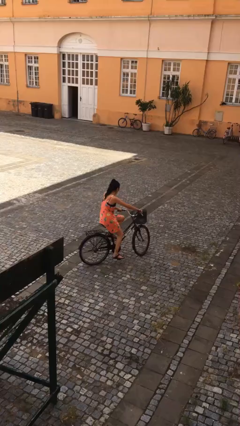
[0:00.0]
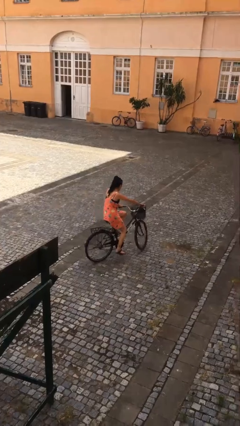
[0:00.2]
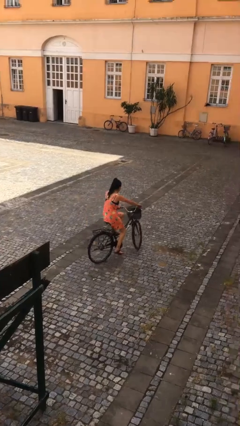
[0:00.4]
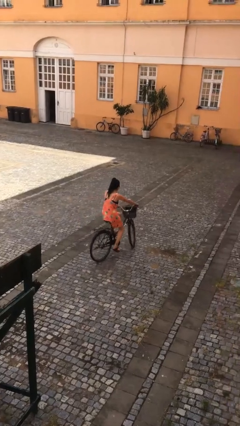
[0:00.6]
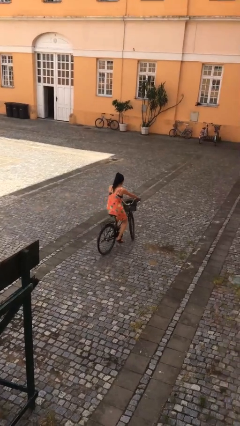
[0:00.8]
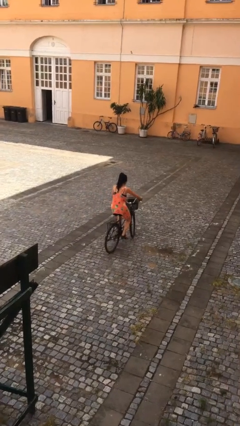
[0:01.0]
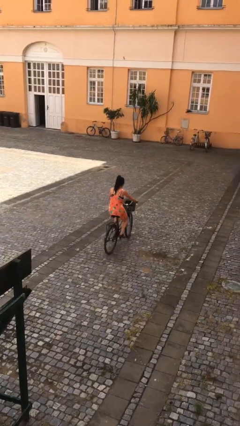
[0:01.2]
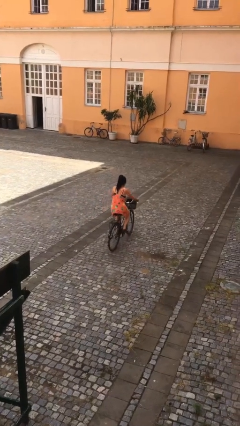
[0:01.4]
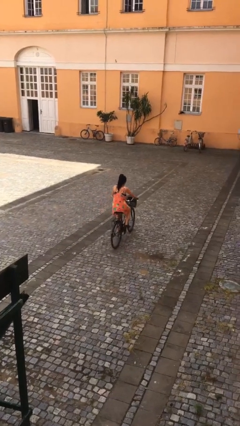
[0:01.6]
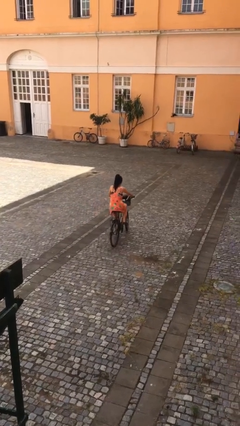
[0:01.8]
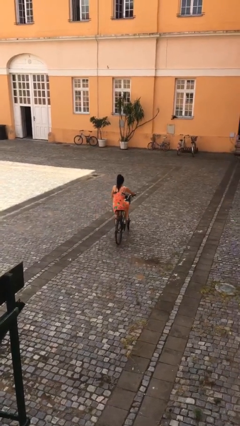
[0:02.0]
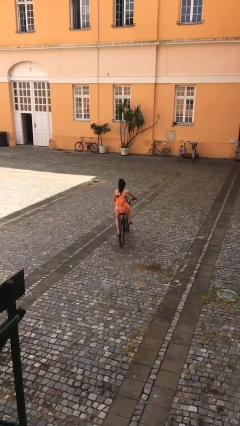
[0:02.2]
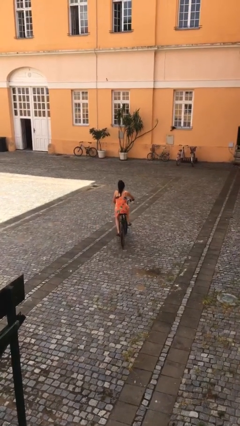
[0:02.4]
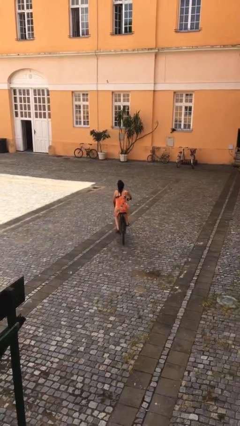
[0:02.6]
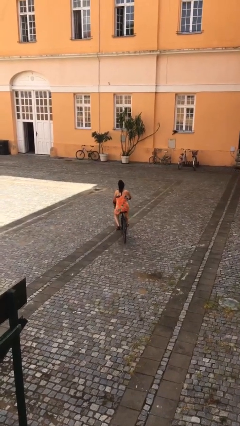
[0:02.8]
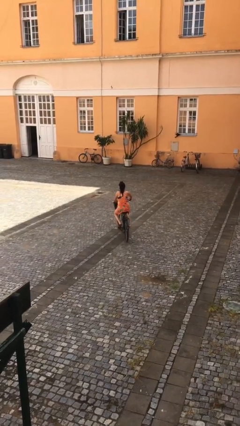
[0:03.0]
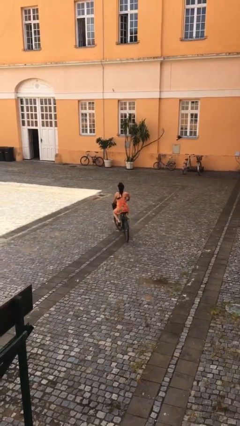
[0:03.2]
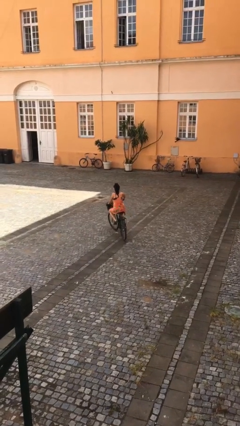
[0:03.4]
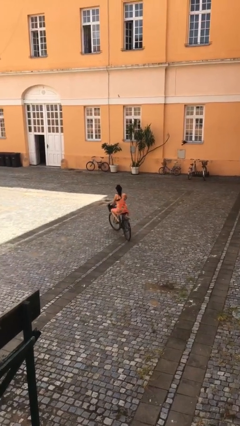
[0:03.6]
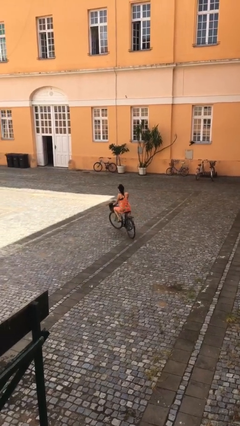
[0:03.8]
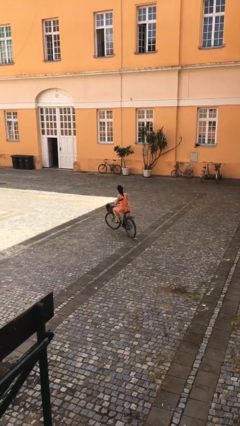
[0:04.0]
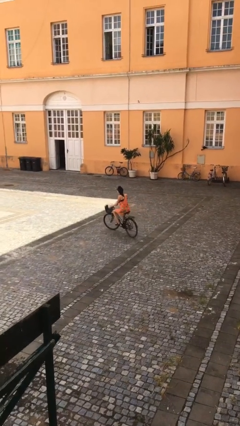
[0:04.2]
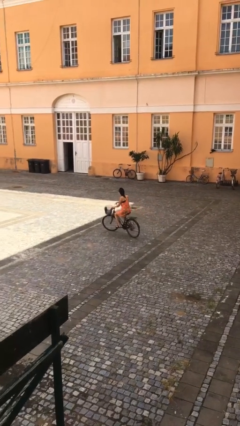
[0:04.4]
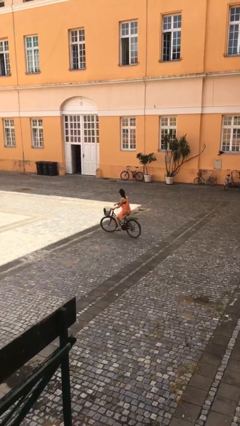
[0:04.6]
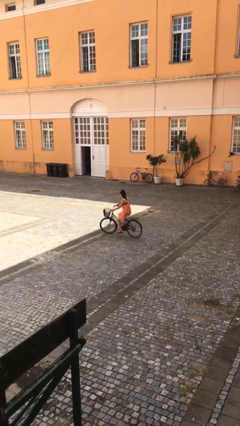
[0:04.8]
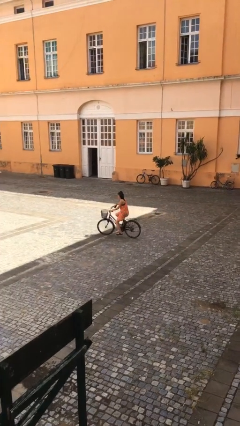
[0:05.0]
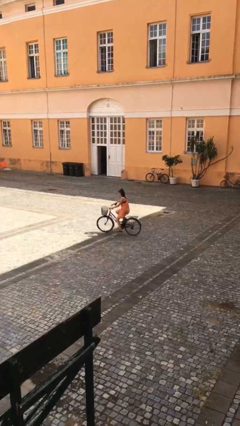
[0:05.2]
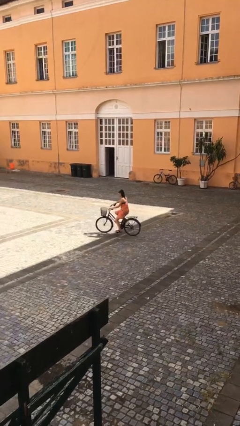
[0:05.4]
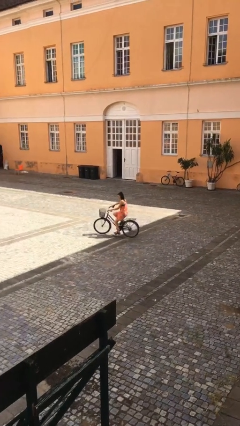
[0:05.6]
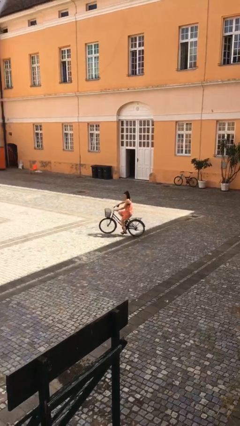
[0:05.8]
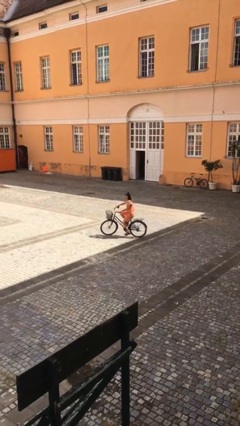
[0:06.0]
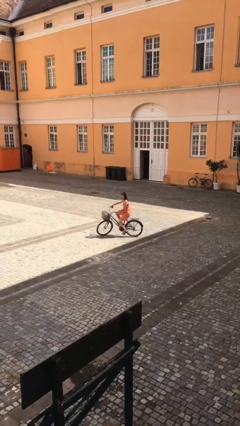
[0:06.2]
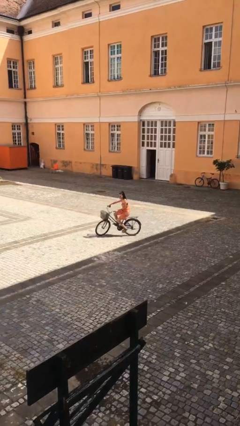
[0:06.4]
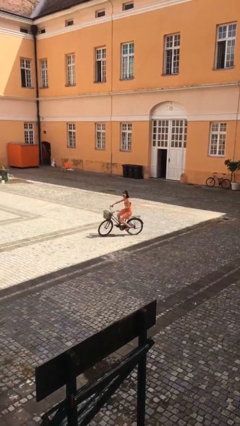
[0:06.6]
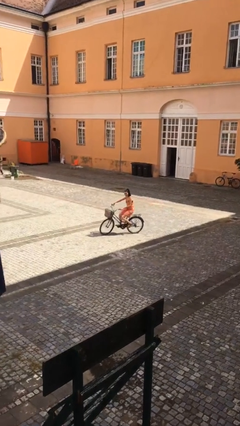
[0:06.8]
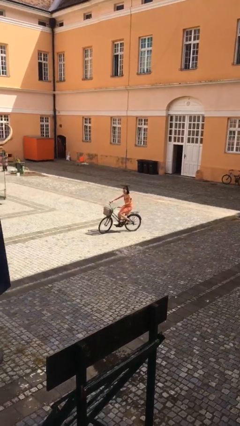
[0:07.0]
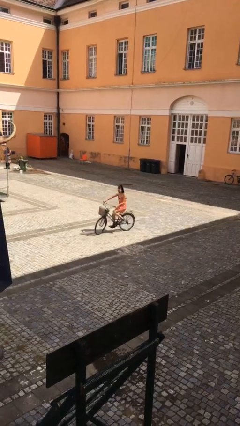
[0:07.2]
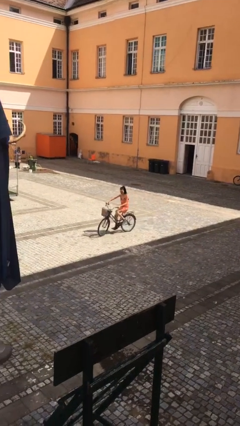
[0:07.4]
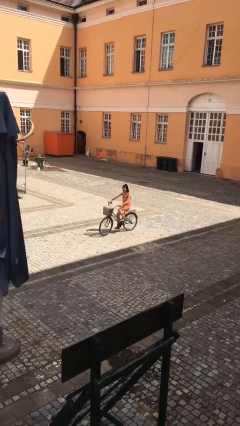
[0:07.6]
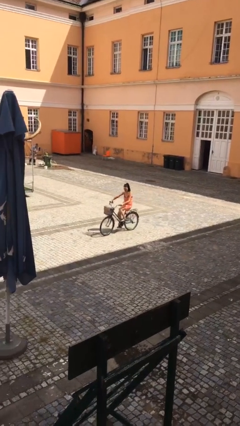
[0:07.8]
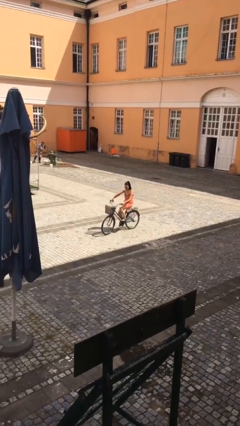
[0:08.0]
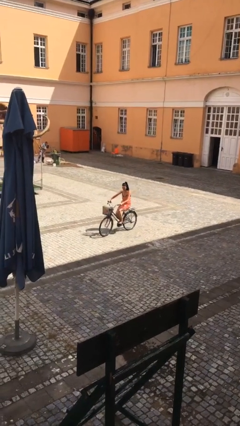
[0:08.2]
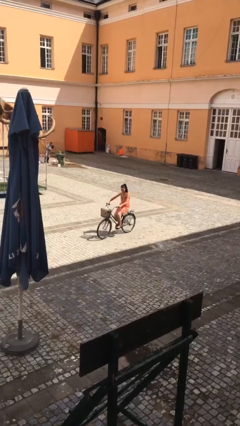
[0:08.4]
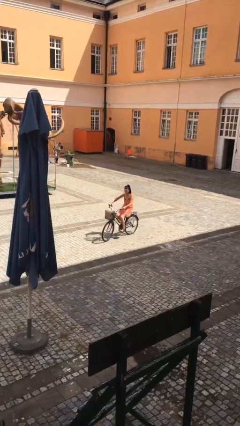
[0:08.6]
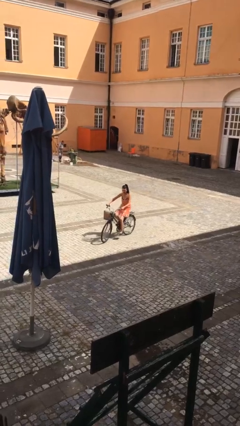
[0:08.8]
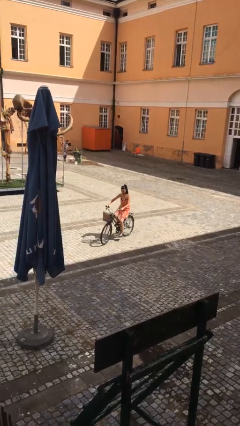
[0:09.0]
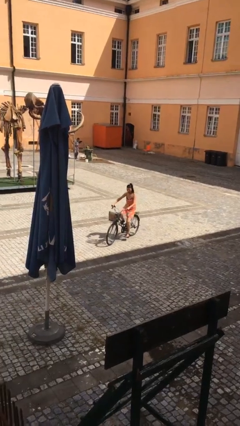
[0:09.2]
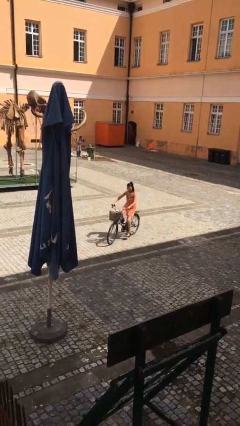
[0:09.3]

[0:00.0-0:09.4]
person rides bicycle

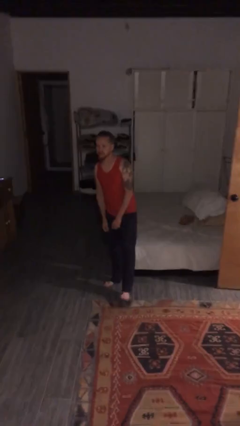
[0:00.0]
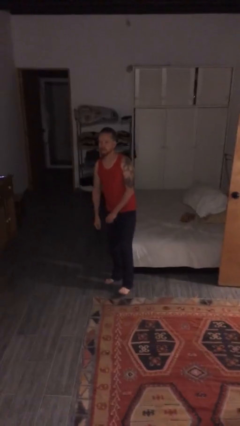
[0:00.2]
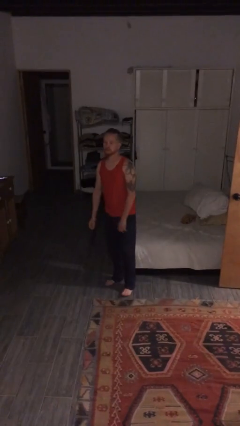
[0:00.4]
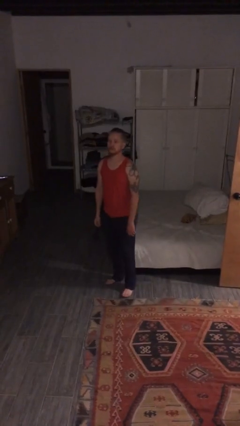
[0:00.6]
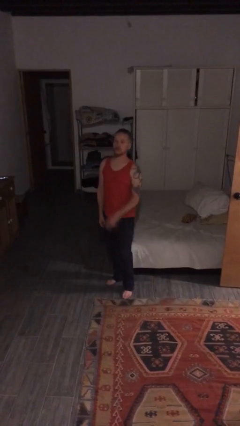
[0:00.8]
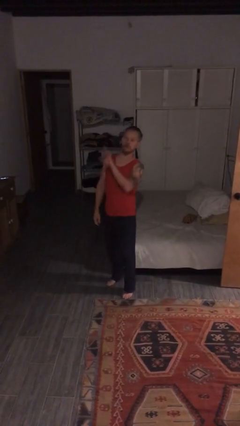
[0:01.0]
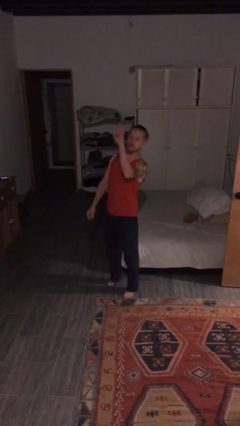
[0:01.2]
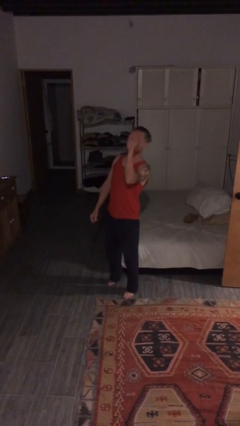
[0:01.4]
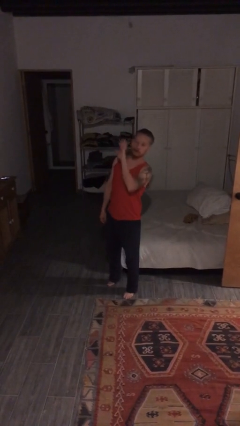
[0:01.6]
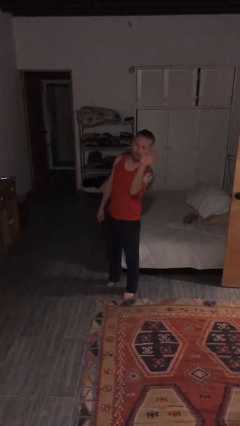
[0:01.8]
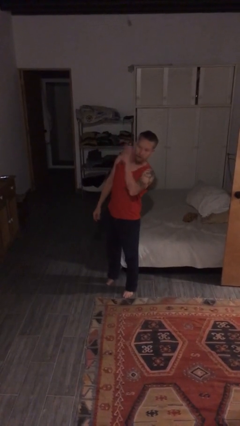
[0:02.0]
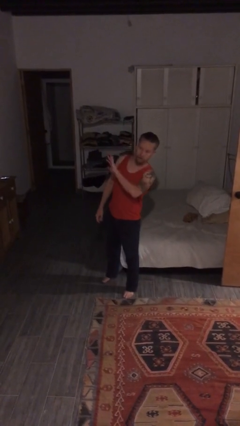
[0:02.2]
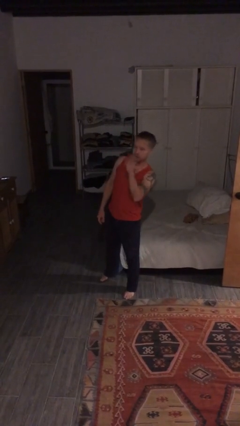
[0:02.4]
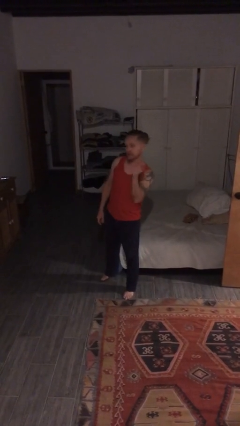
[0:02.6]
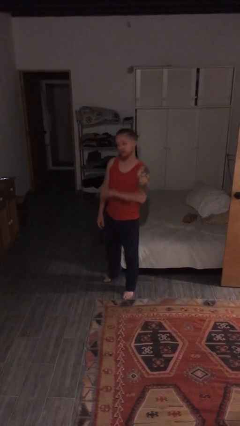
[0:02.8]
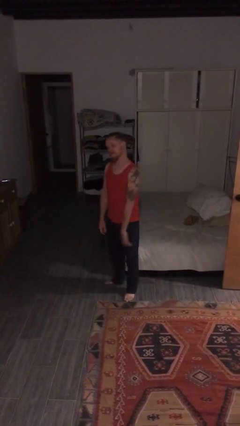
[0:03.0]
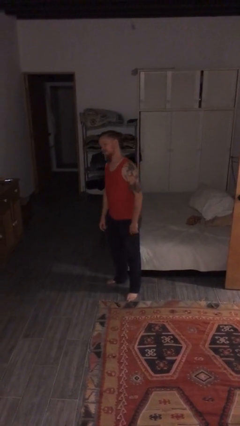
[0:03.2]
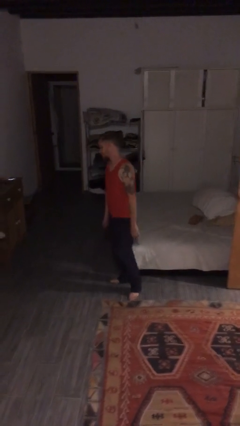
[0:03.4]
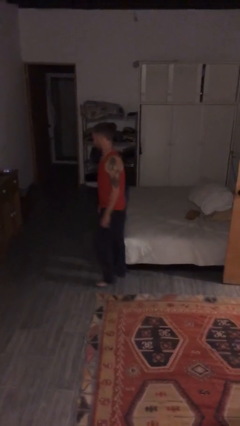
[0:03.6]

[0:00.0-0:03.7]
person waves at person

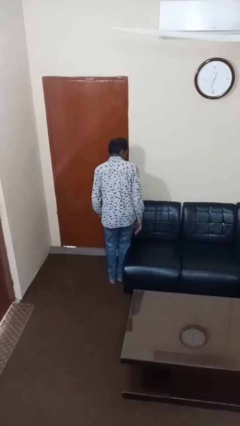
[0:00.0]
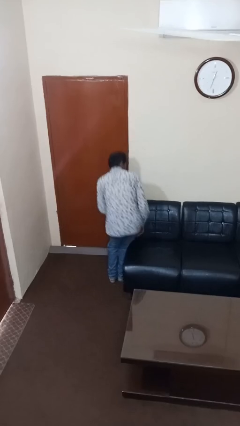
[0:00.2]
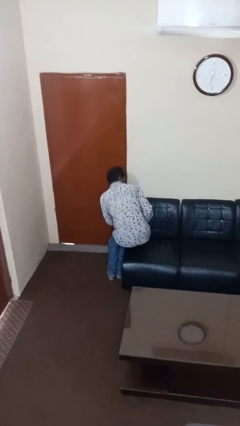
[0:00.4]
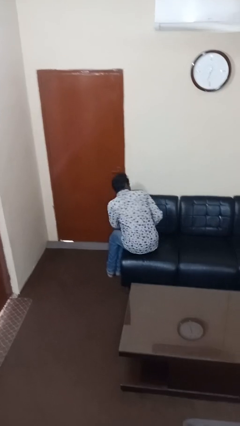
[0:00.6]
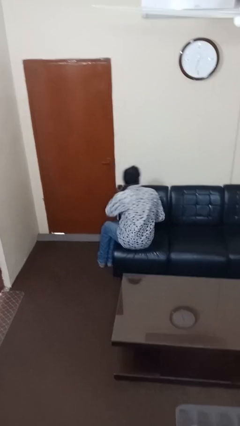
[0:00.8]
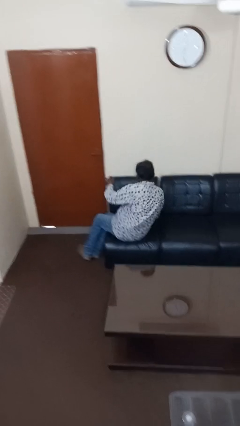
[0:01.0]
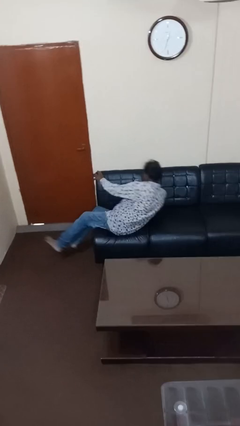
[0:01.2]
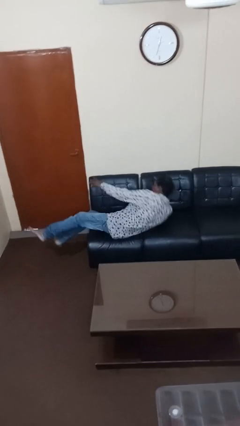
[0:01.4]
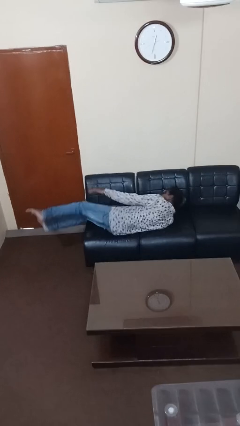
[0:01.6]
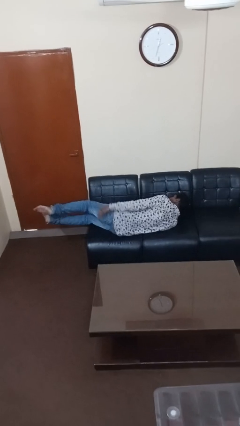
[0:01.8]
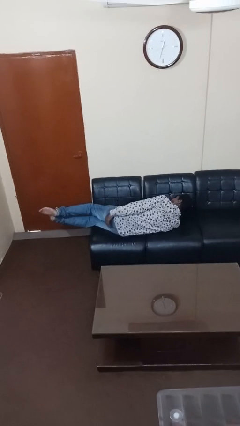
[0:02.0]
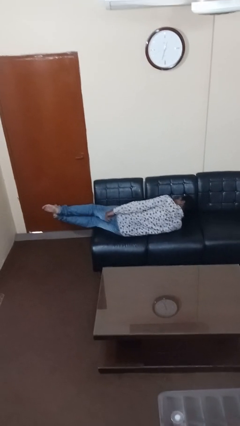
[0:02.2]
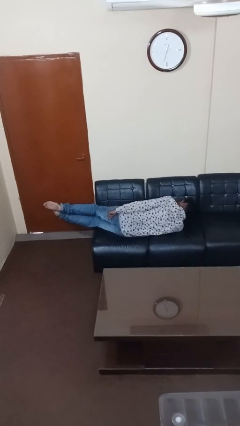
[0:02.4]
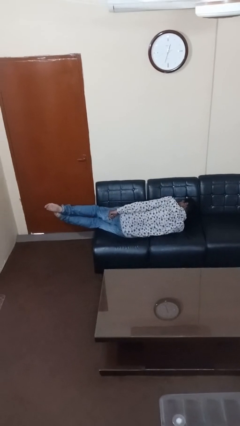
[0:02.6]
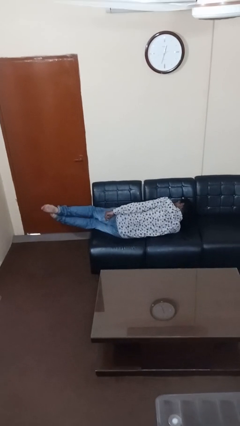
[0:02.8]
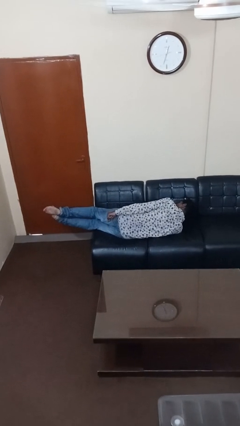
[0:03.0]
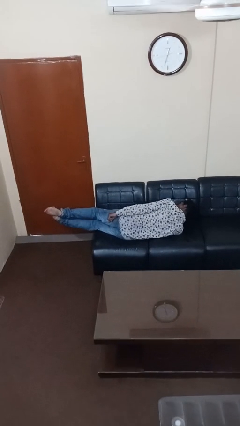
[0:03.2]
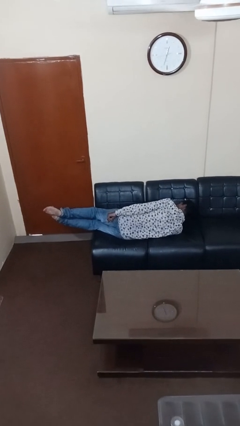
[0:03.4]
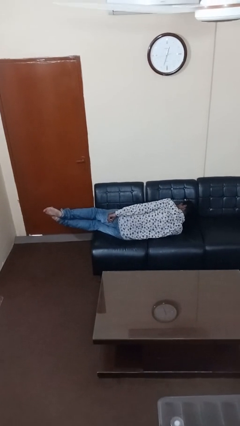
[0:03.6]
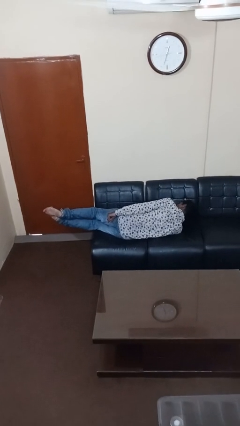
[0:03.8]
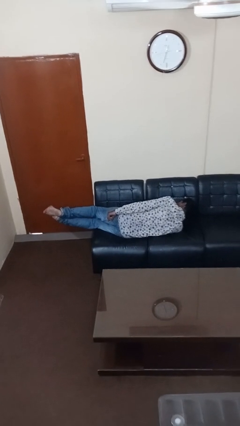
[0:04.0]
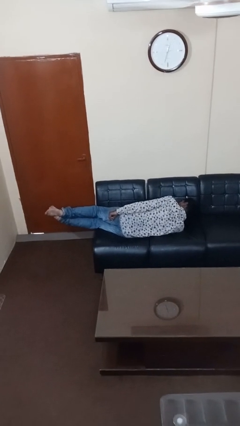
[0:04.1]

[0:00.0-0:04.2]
person lies down on couch

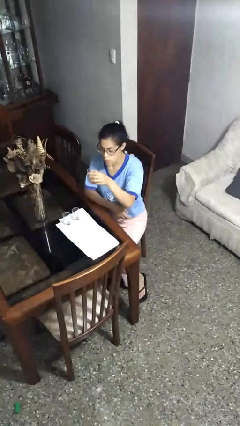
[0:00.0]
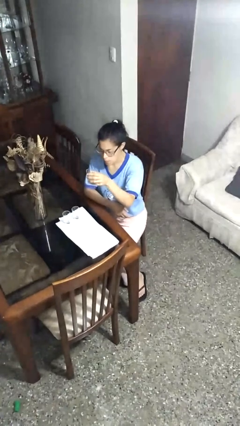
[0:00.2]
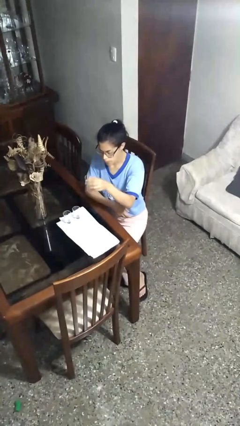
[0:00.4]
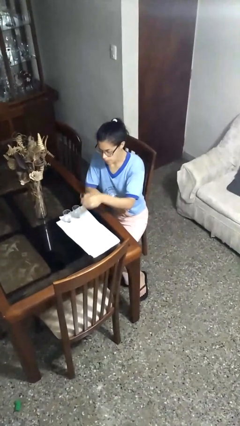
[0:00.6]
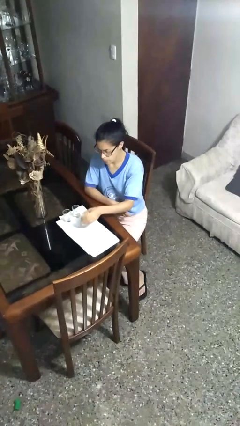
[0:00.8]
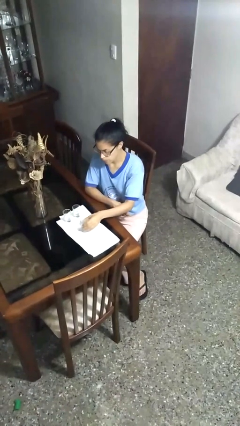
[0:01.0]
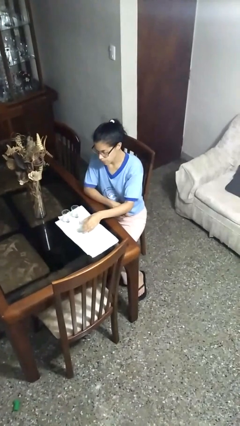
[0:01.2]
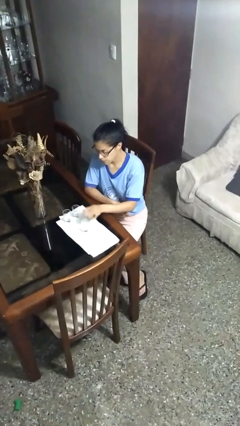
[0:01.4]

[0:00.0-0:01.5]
person puts down object on table
